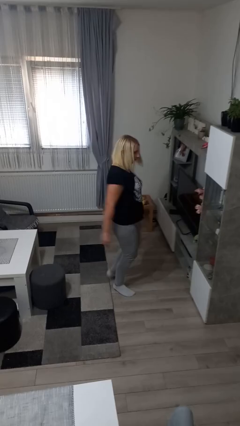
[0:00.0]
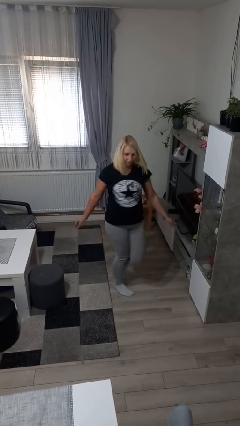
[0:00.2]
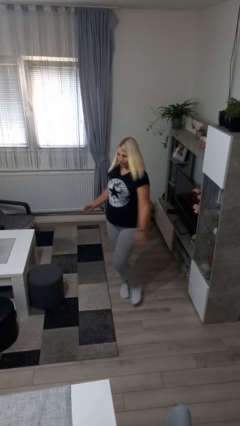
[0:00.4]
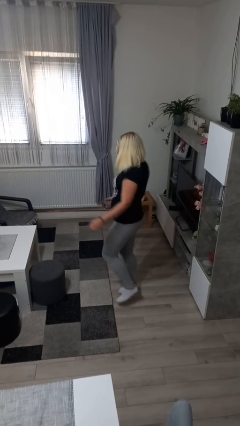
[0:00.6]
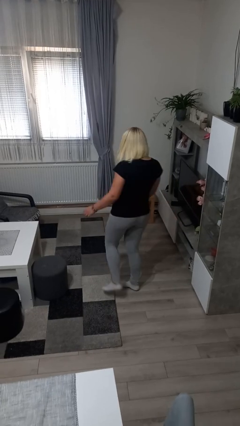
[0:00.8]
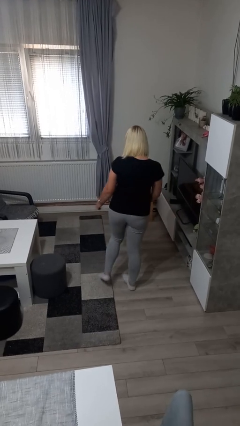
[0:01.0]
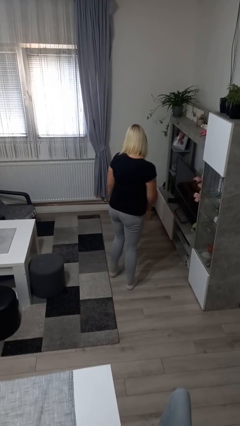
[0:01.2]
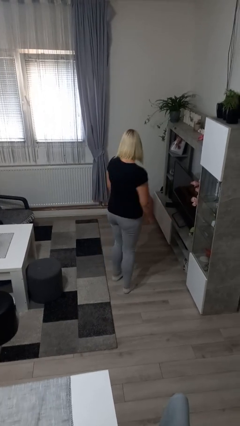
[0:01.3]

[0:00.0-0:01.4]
person twirls

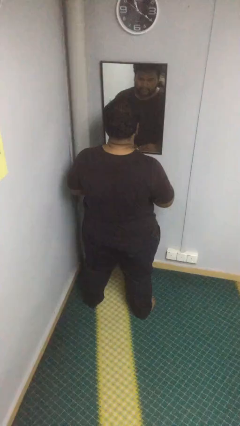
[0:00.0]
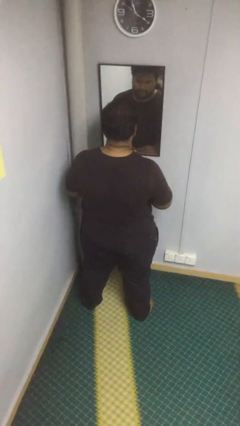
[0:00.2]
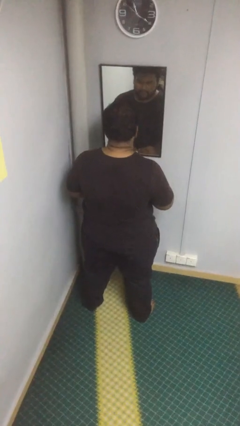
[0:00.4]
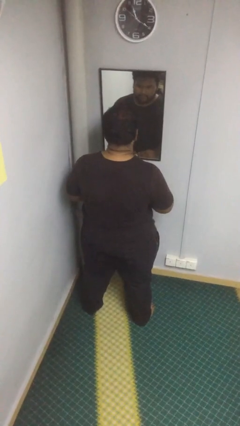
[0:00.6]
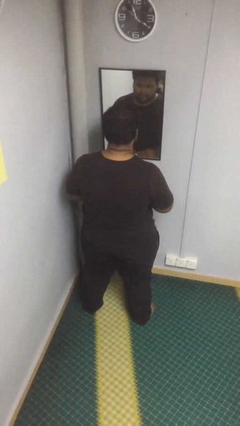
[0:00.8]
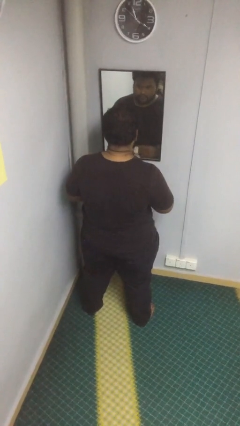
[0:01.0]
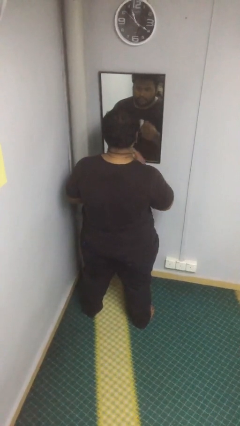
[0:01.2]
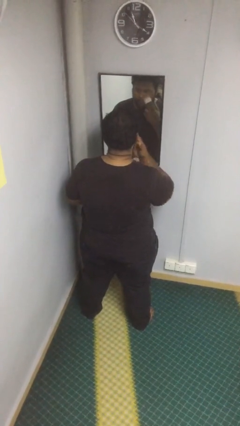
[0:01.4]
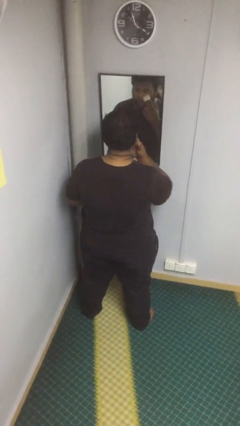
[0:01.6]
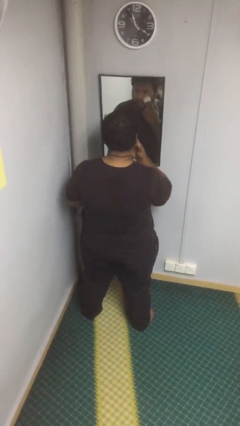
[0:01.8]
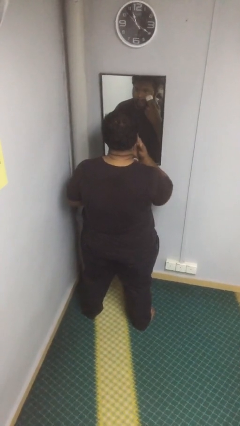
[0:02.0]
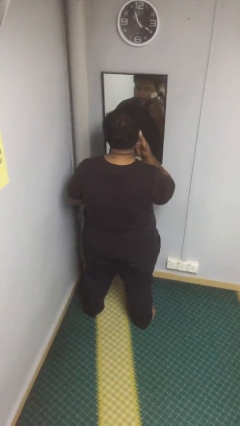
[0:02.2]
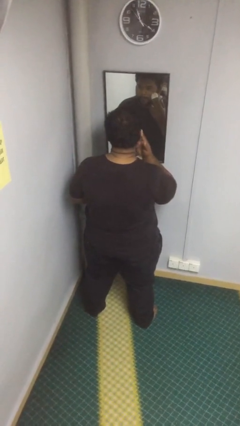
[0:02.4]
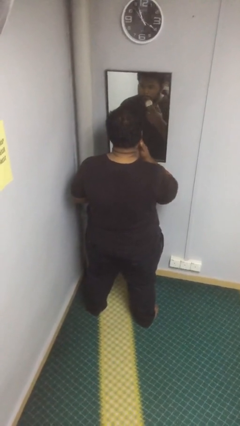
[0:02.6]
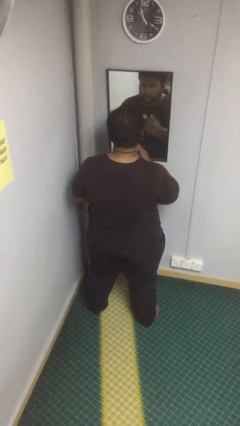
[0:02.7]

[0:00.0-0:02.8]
person applies foundation makeup

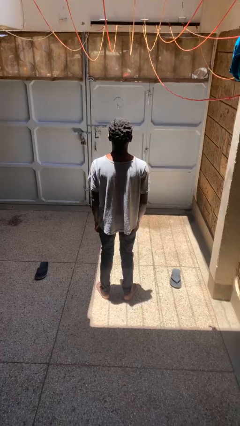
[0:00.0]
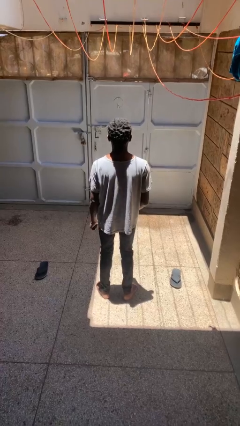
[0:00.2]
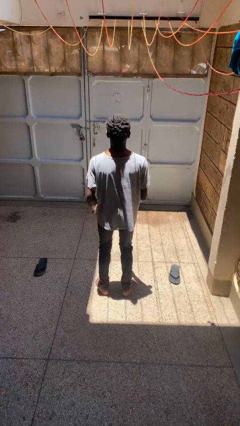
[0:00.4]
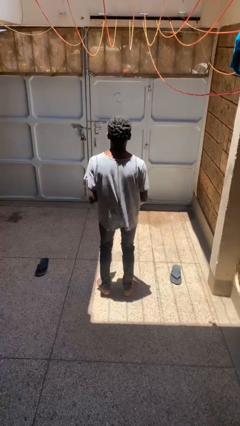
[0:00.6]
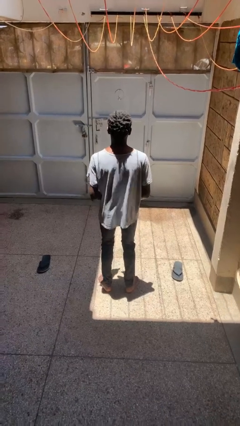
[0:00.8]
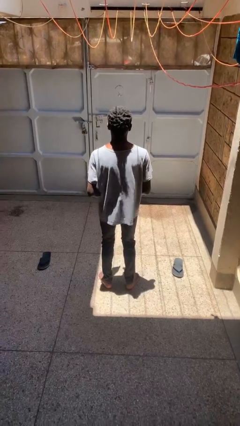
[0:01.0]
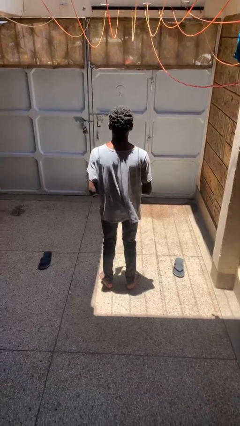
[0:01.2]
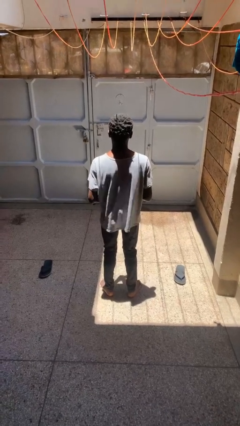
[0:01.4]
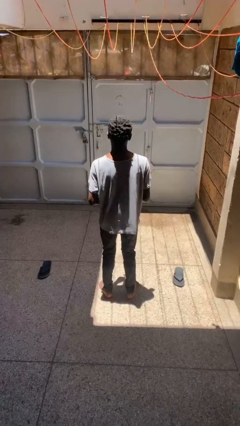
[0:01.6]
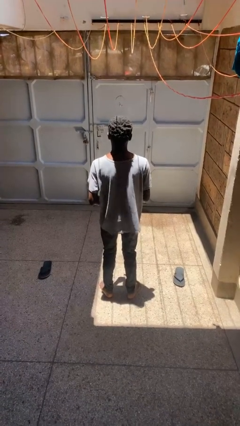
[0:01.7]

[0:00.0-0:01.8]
person dances in place

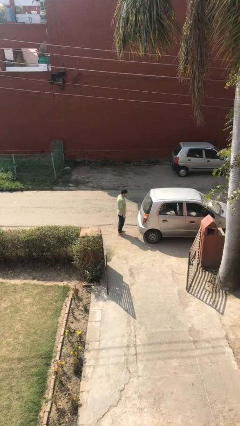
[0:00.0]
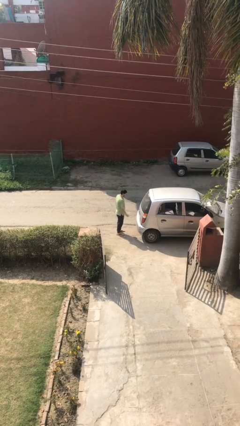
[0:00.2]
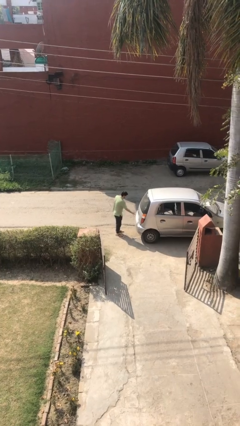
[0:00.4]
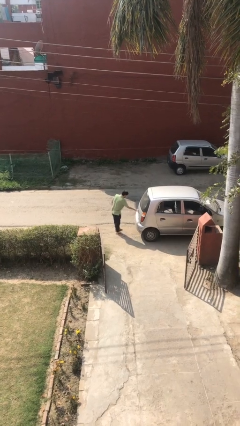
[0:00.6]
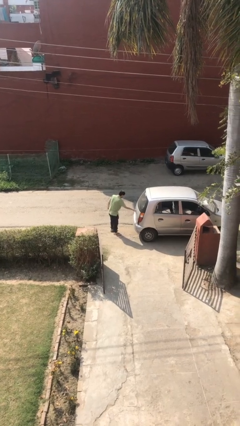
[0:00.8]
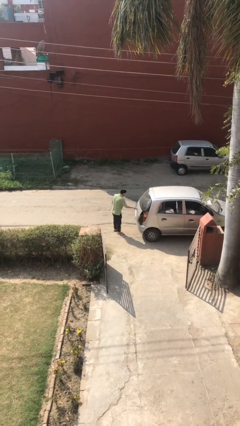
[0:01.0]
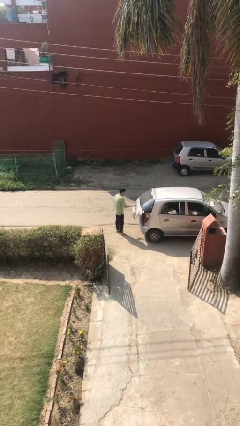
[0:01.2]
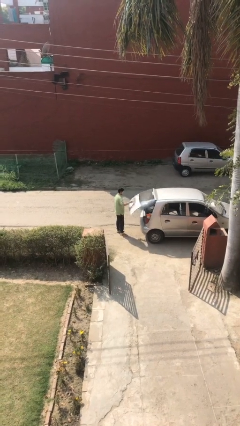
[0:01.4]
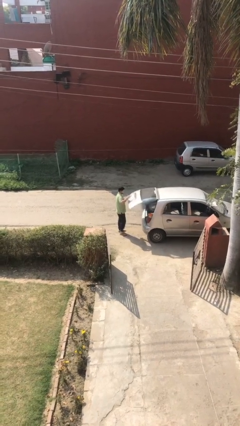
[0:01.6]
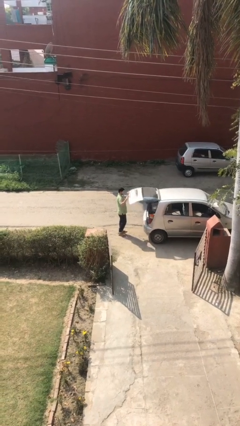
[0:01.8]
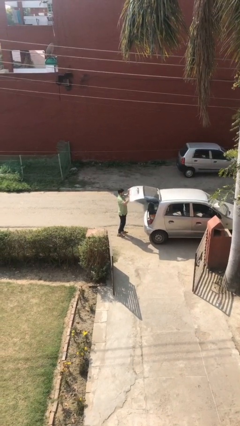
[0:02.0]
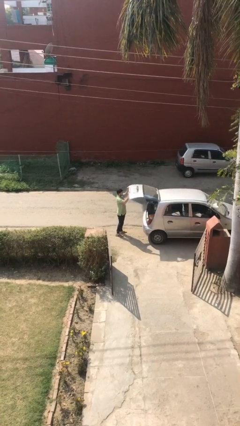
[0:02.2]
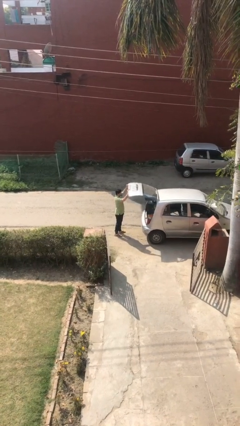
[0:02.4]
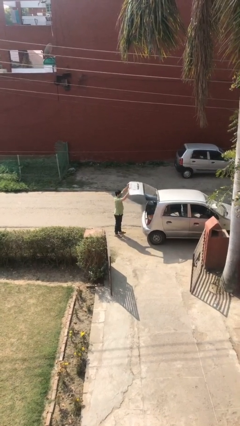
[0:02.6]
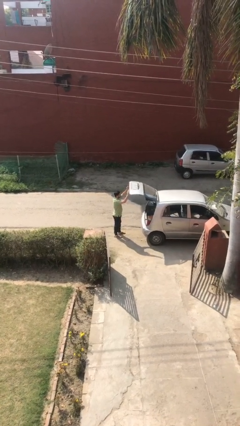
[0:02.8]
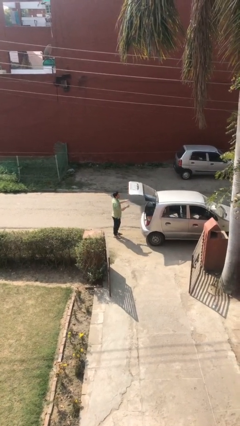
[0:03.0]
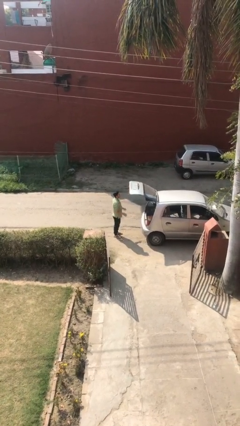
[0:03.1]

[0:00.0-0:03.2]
person opens car trunk

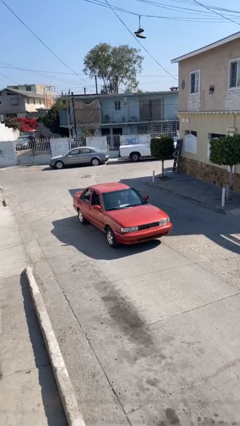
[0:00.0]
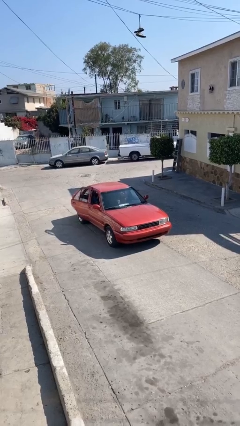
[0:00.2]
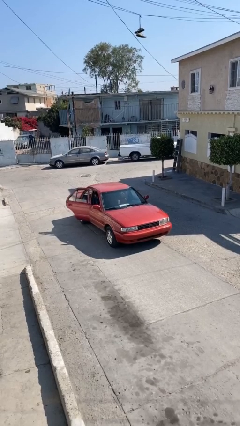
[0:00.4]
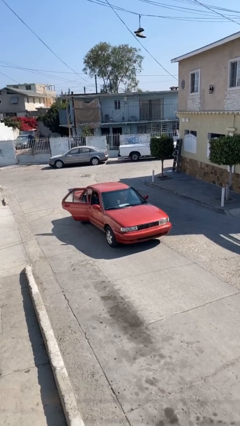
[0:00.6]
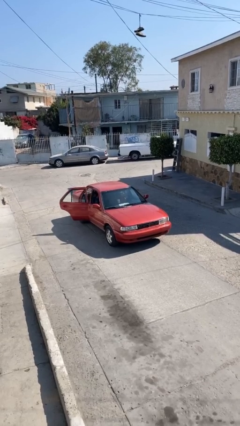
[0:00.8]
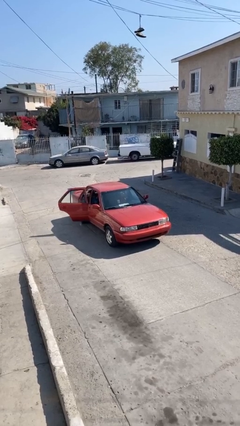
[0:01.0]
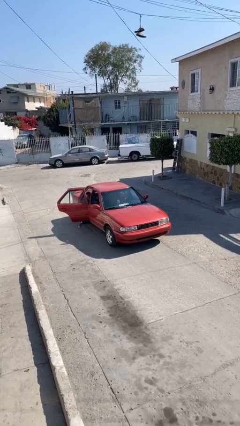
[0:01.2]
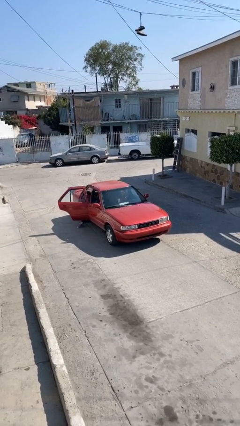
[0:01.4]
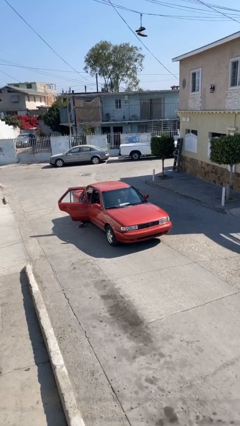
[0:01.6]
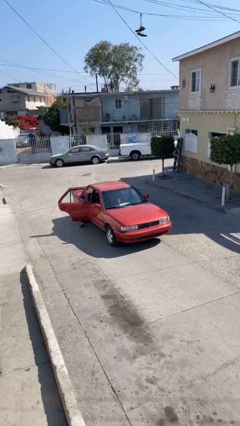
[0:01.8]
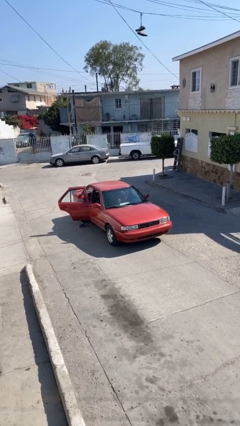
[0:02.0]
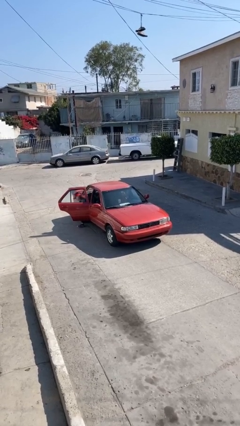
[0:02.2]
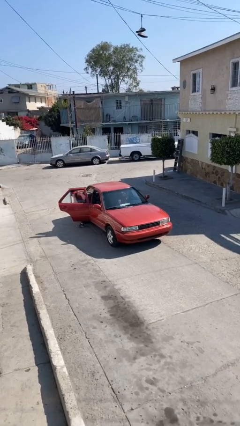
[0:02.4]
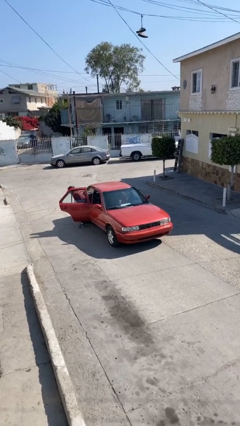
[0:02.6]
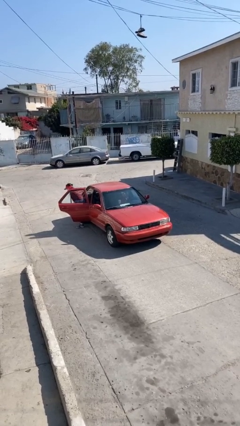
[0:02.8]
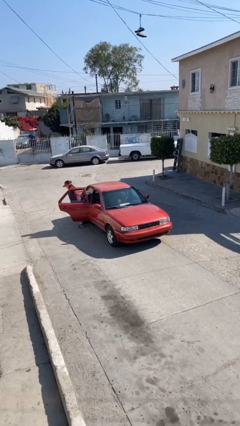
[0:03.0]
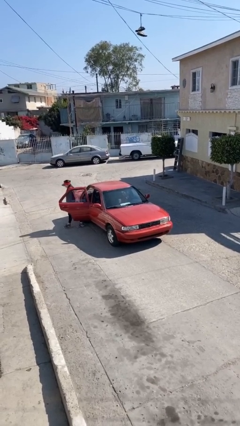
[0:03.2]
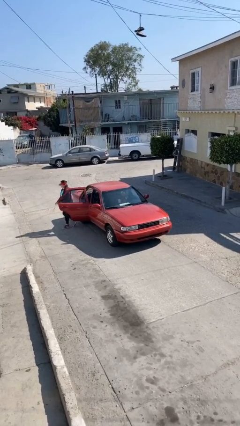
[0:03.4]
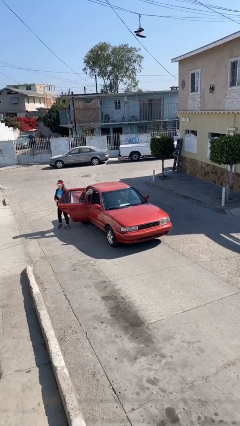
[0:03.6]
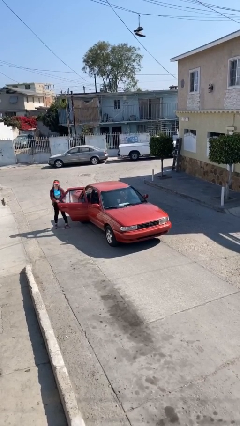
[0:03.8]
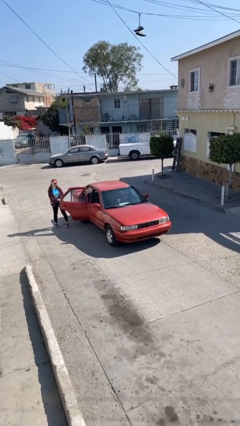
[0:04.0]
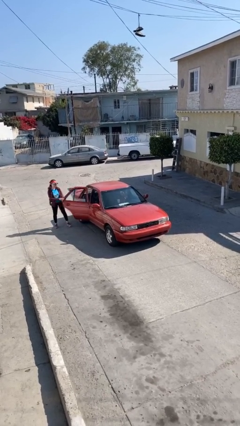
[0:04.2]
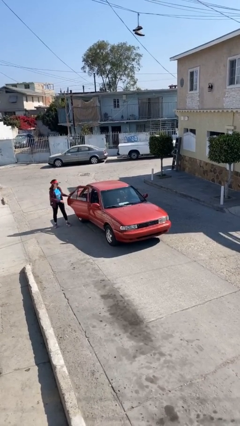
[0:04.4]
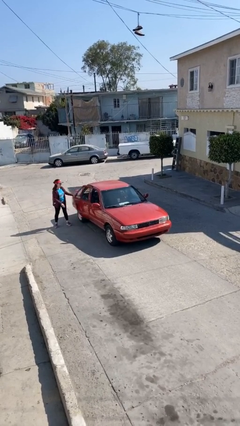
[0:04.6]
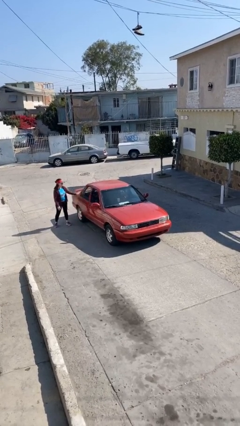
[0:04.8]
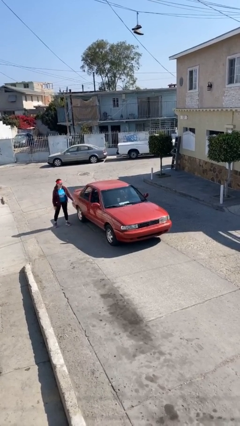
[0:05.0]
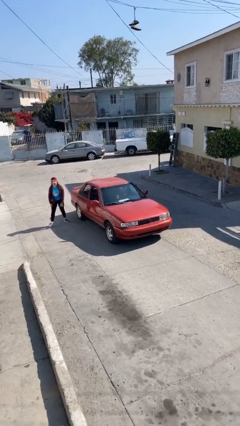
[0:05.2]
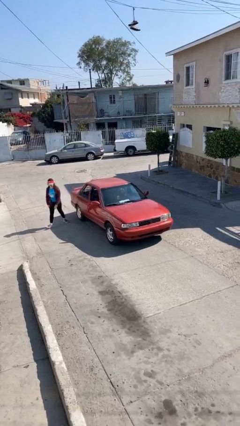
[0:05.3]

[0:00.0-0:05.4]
car drops off person

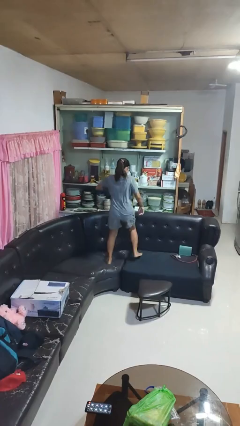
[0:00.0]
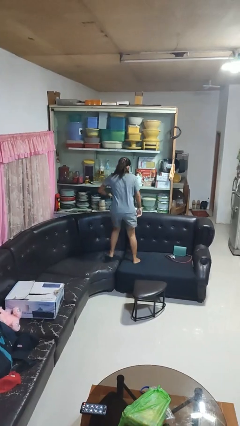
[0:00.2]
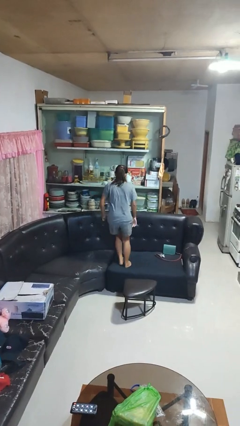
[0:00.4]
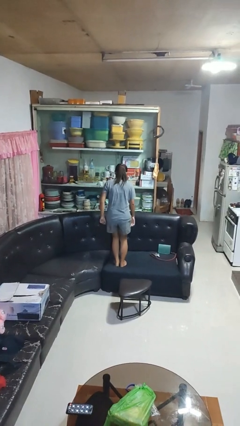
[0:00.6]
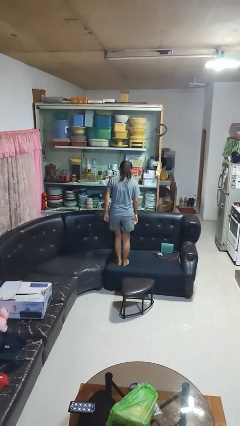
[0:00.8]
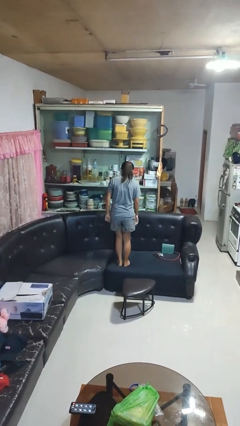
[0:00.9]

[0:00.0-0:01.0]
person jumps on couch

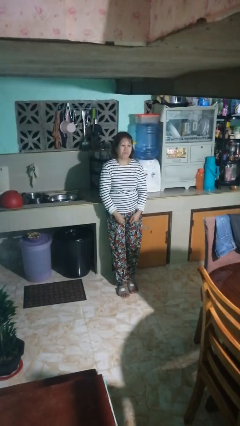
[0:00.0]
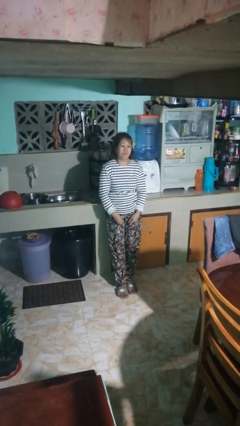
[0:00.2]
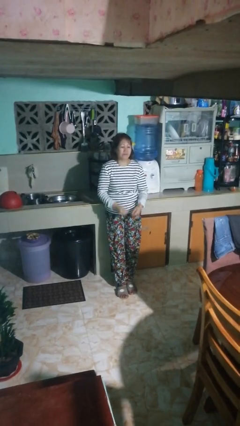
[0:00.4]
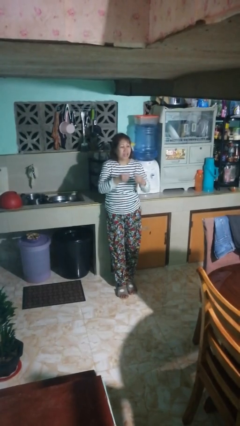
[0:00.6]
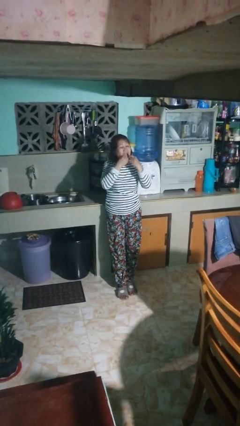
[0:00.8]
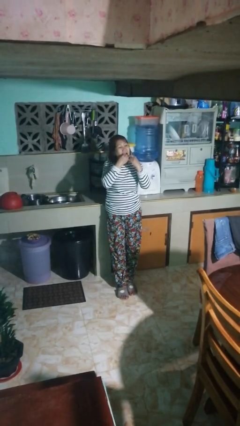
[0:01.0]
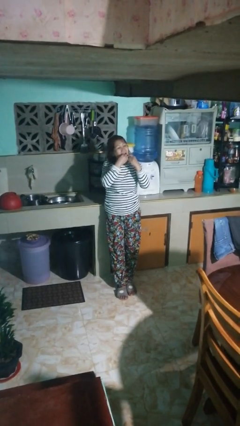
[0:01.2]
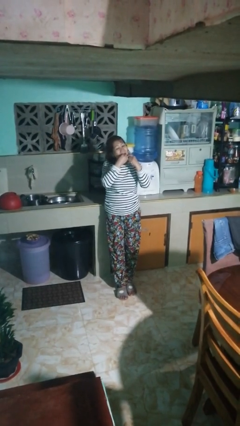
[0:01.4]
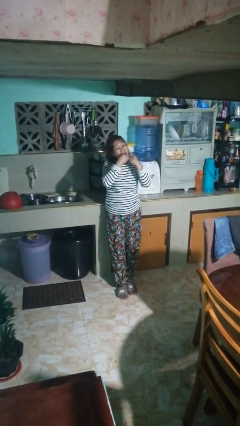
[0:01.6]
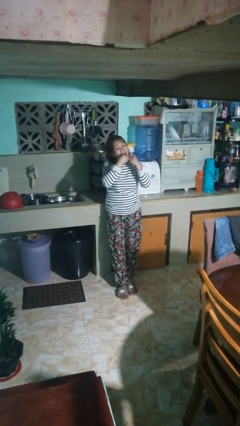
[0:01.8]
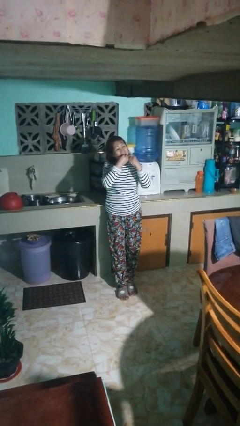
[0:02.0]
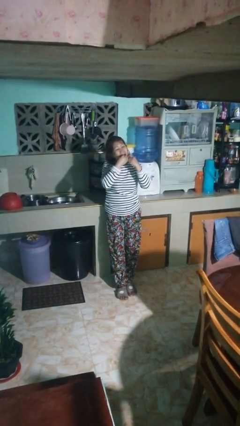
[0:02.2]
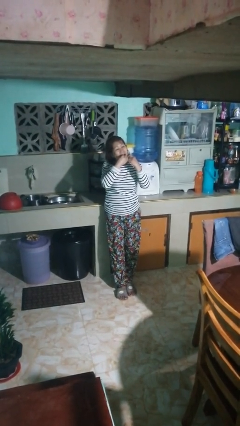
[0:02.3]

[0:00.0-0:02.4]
person flosses
